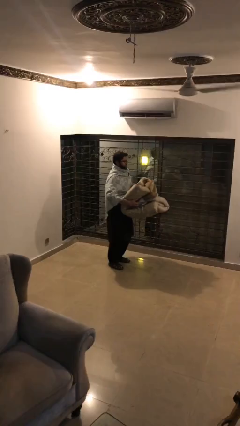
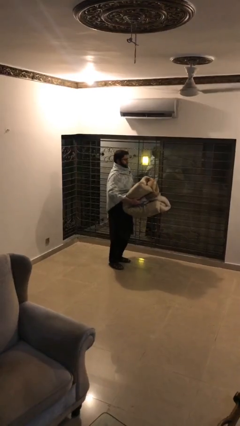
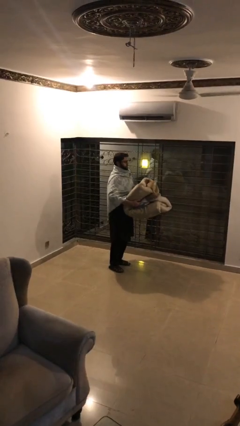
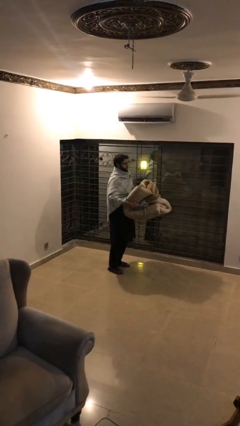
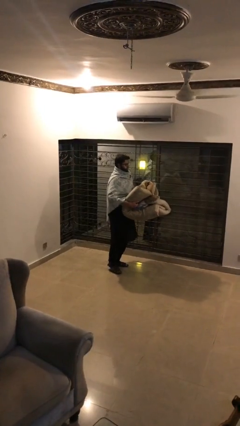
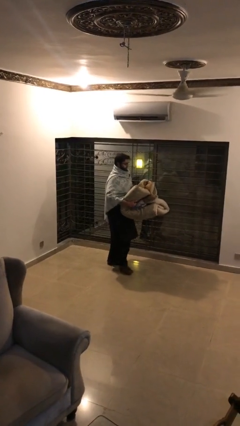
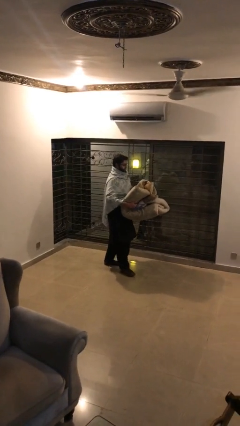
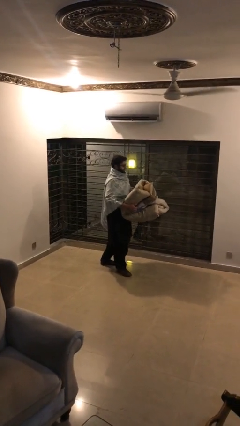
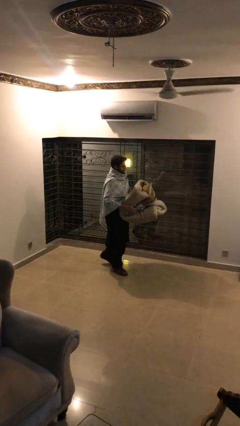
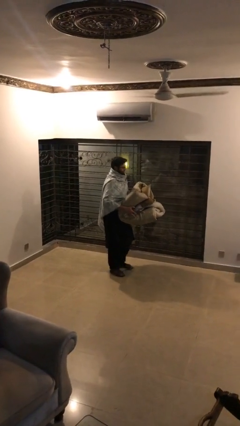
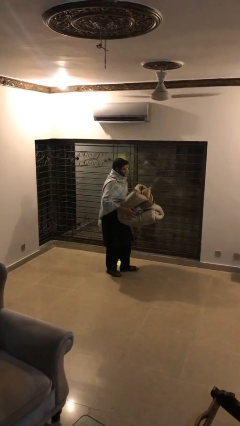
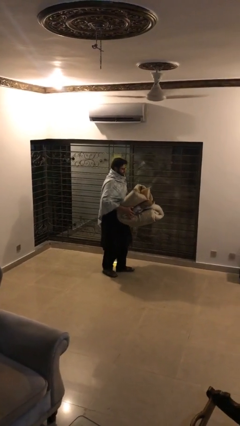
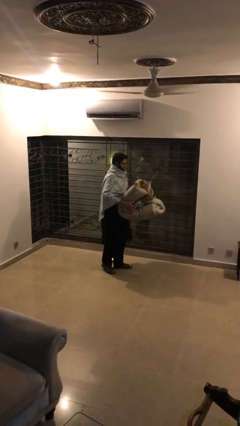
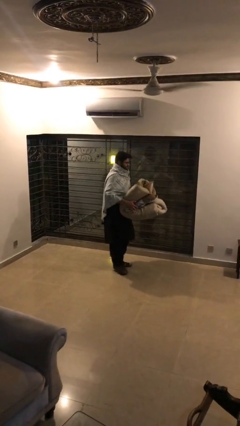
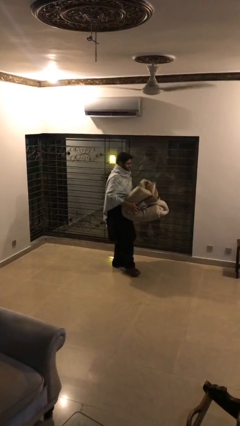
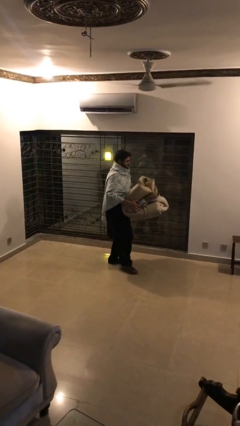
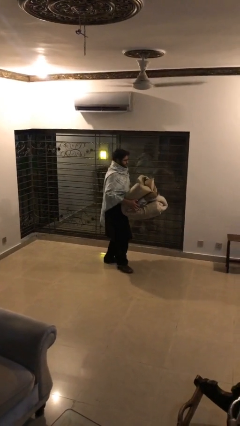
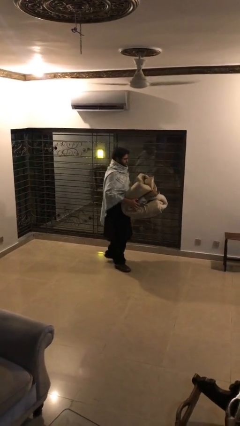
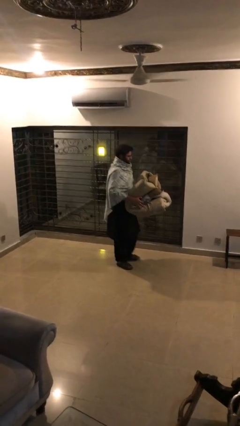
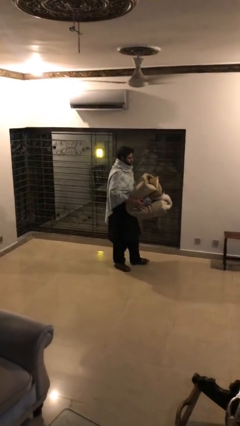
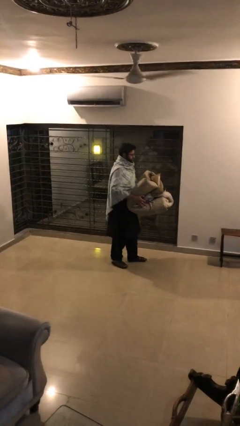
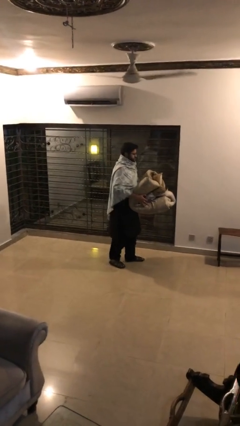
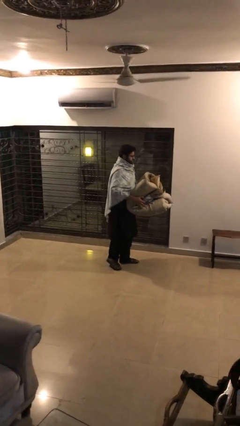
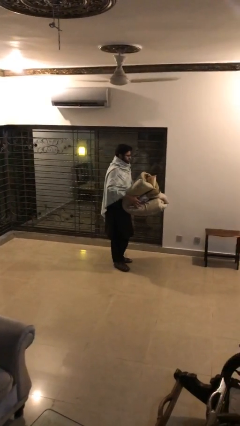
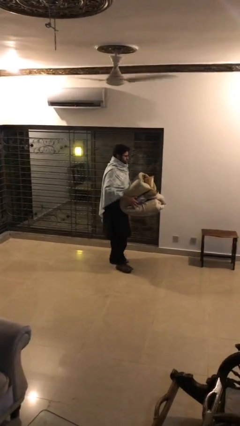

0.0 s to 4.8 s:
person carries heavy object

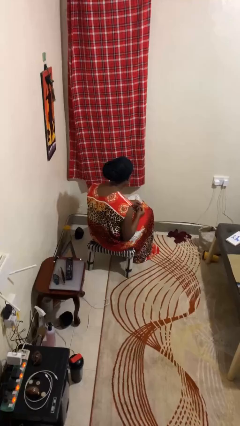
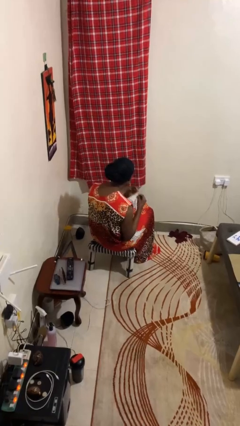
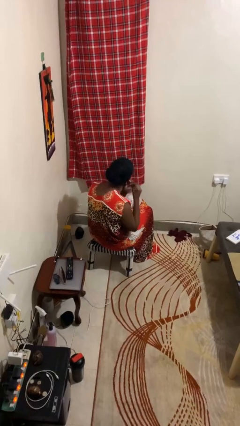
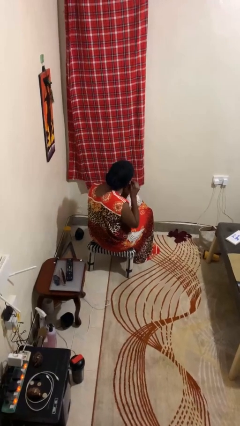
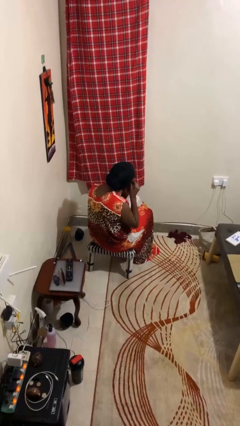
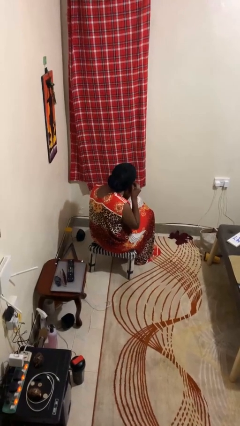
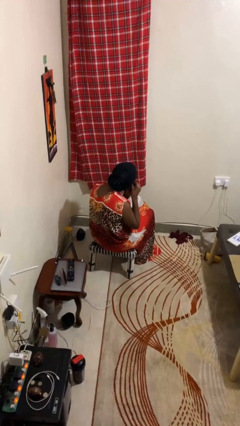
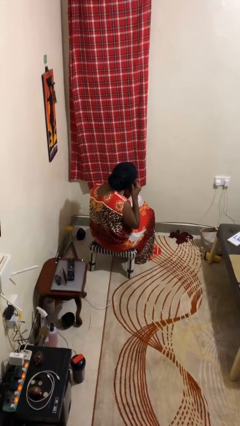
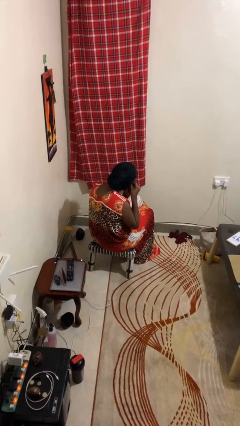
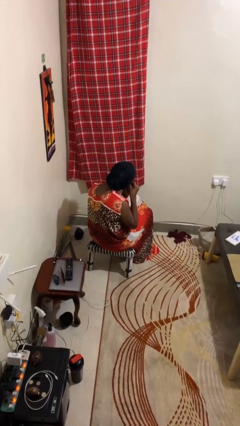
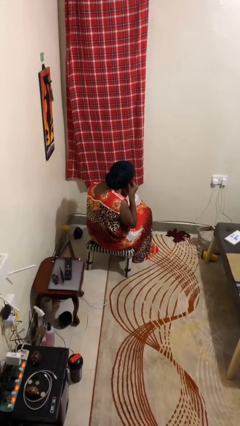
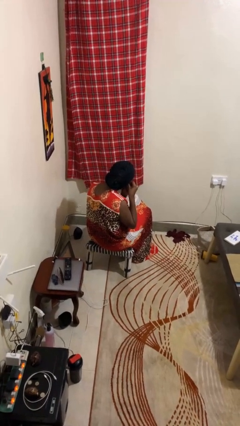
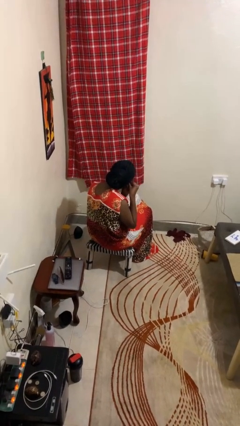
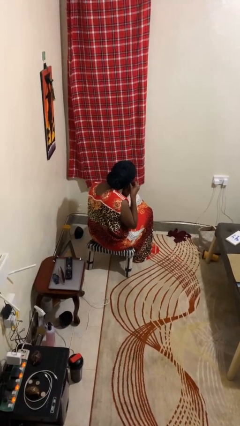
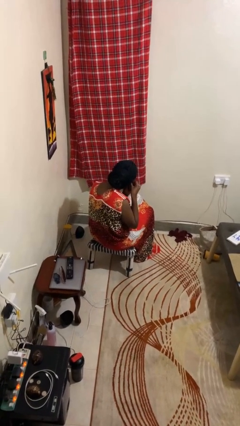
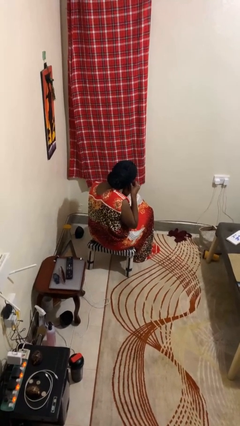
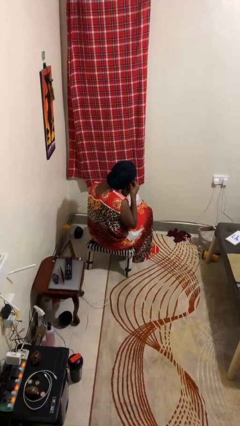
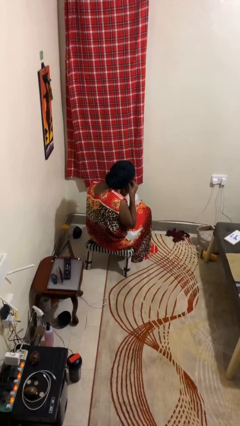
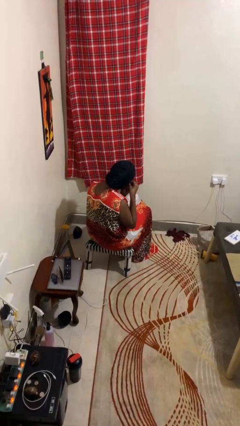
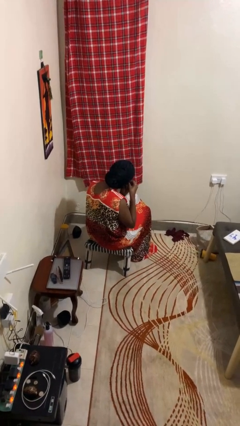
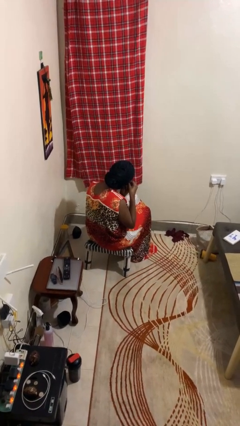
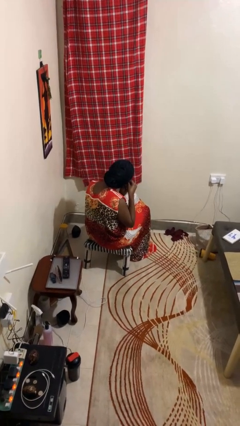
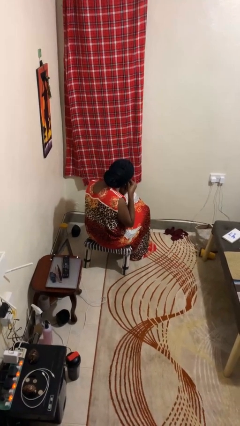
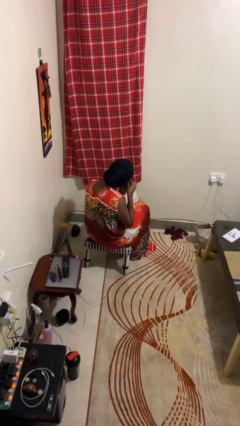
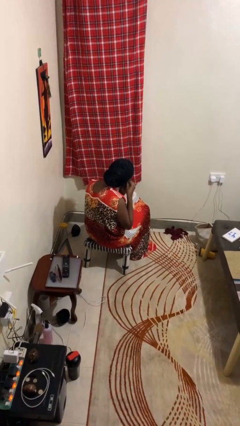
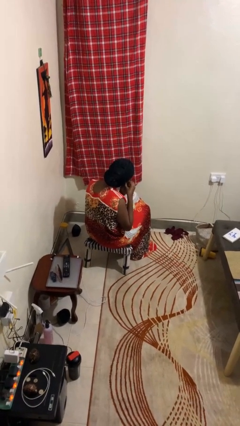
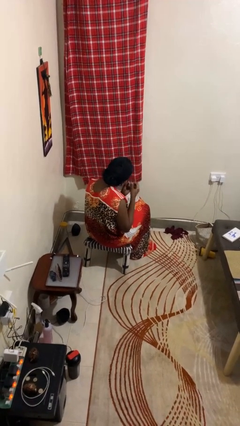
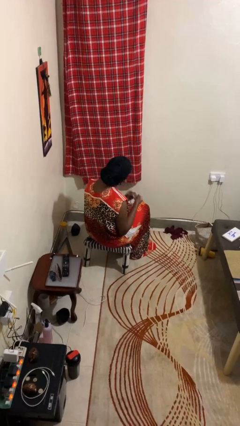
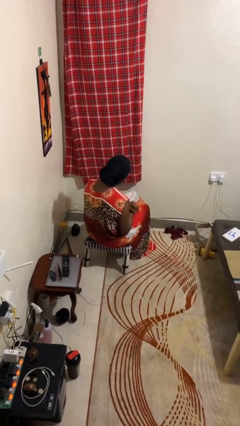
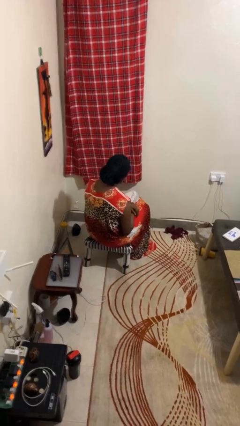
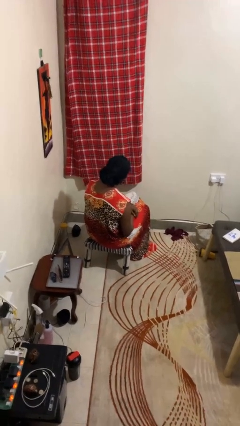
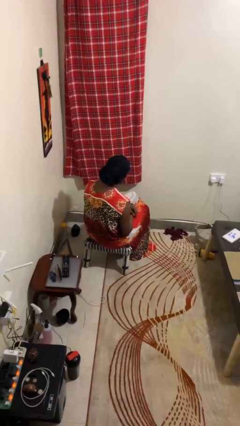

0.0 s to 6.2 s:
person puts on earrings

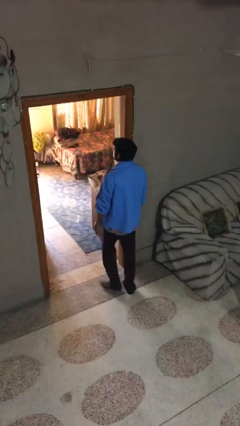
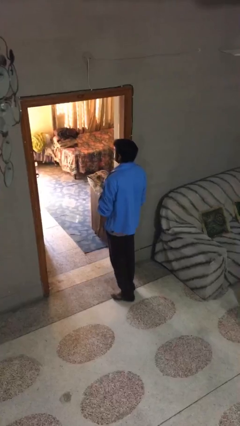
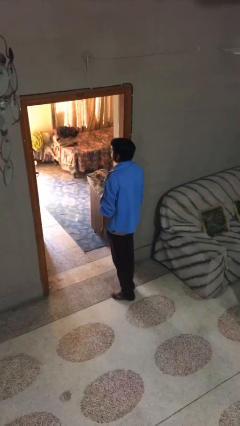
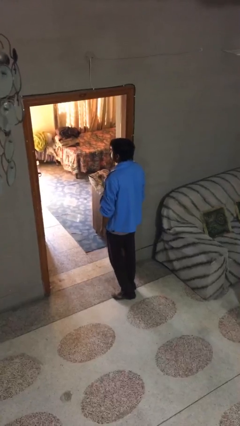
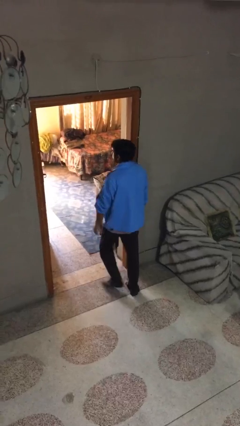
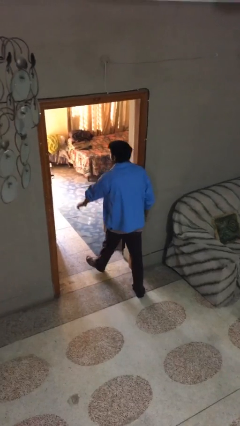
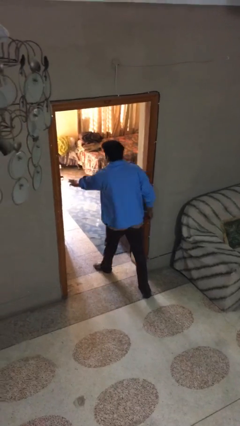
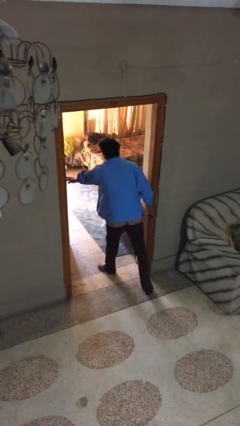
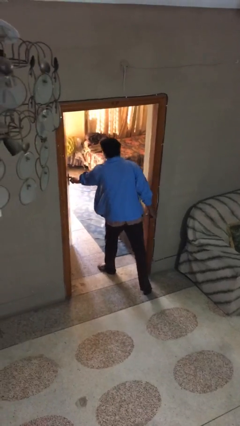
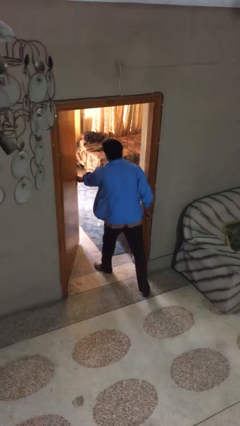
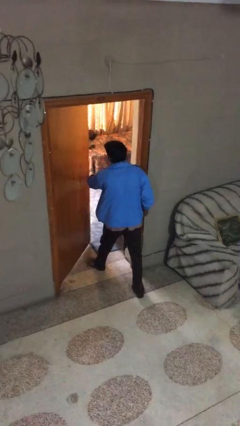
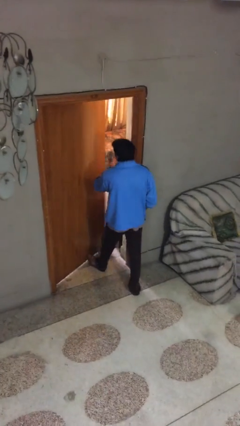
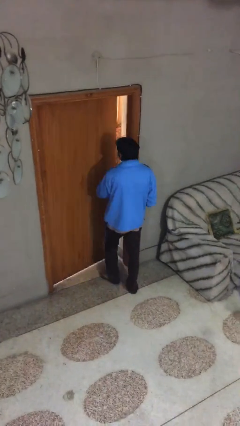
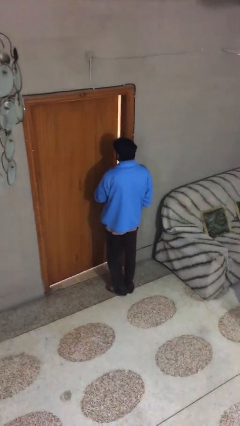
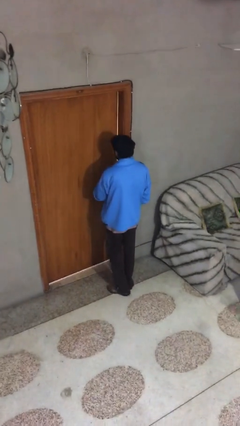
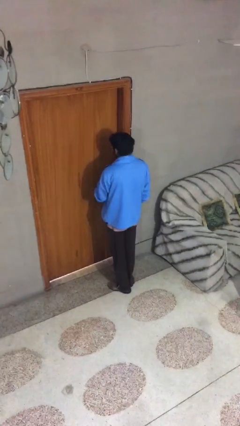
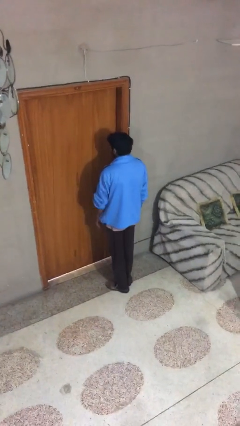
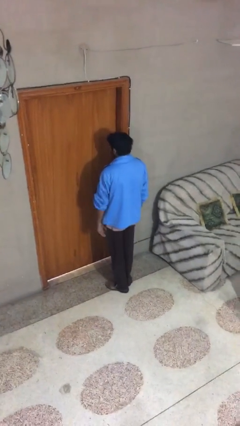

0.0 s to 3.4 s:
person closes facility door

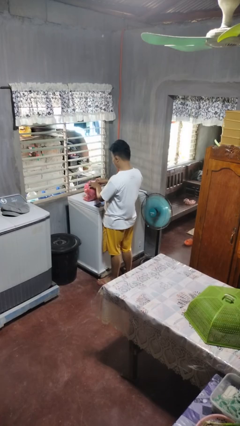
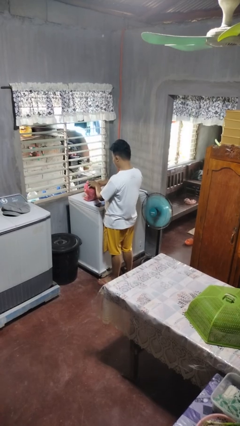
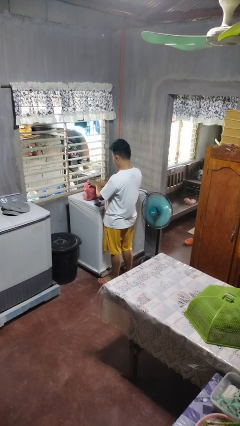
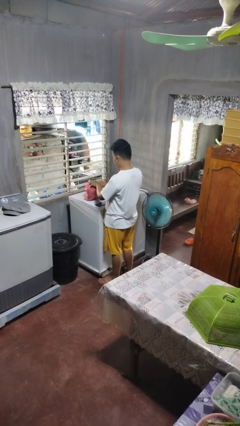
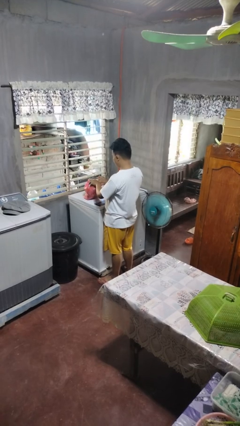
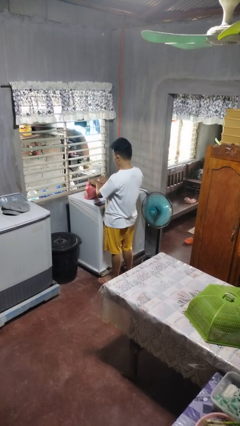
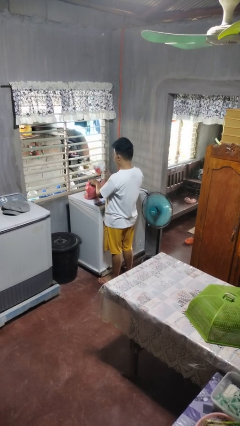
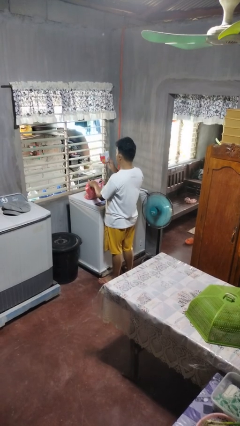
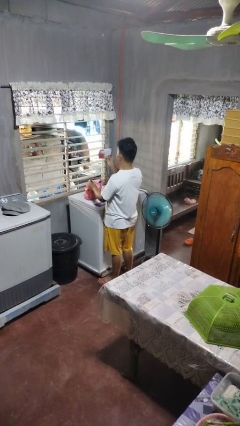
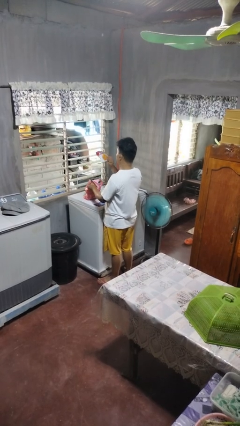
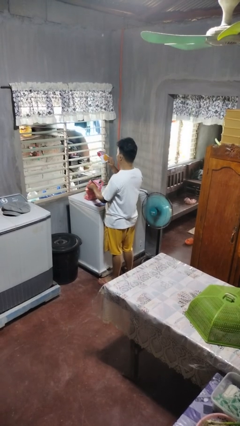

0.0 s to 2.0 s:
person takes object from bag

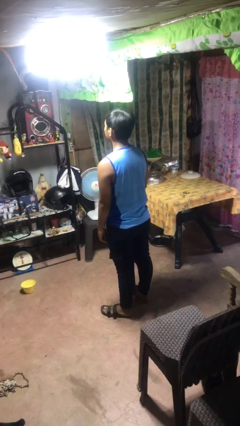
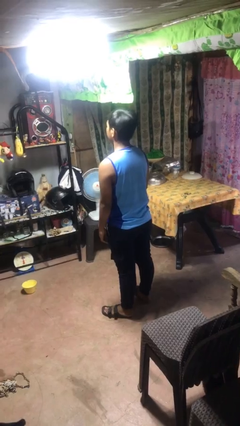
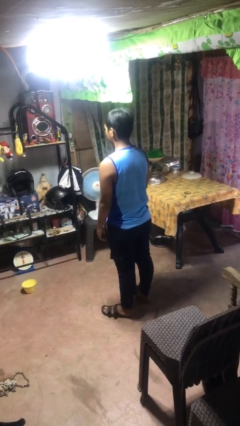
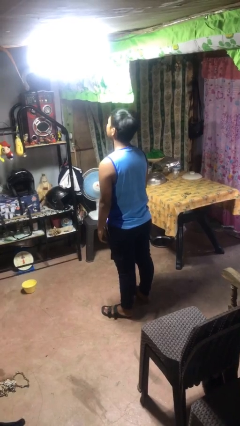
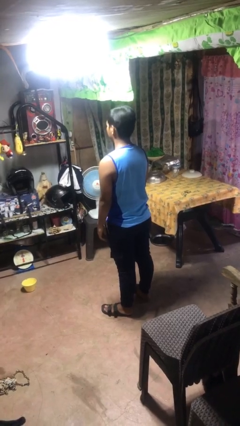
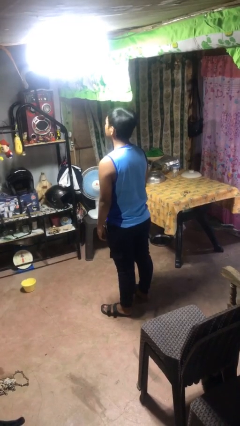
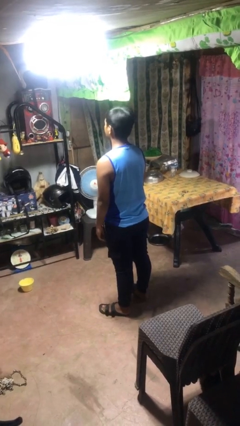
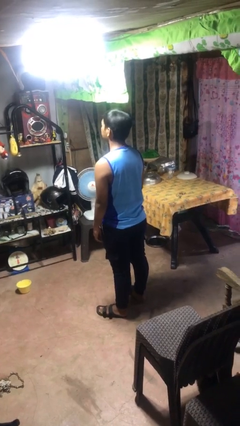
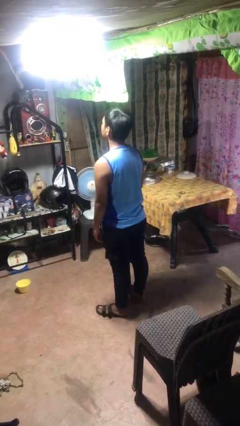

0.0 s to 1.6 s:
person nods head
